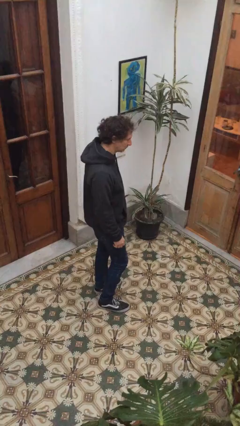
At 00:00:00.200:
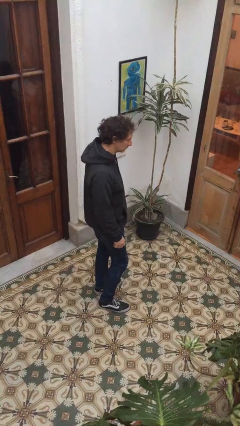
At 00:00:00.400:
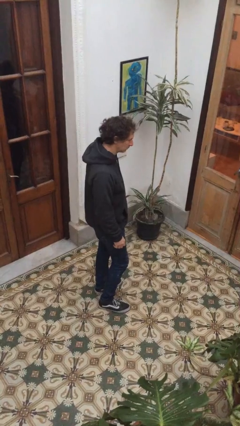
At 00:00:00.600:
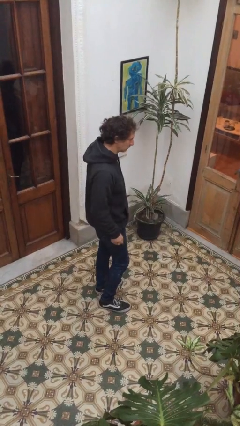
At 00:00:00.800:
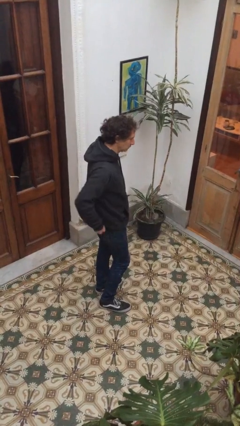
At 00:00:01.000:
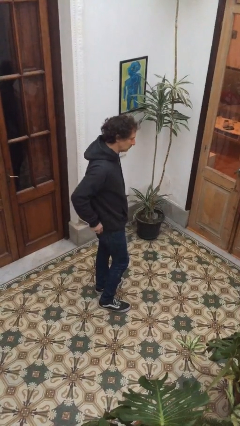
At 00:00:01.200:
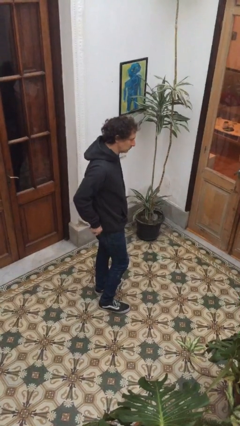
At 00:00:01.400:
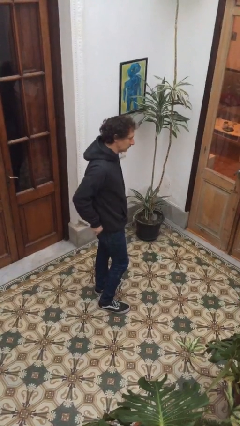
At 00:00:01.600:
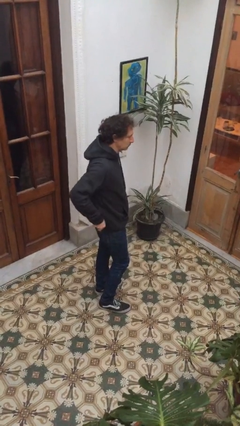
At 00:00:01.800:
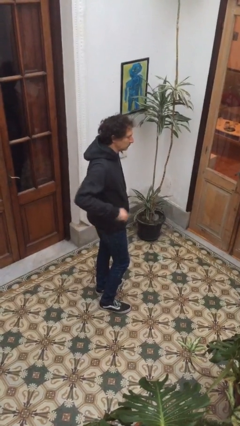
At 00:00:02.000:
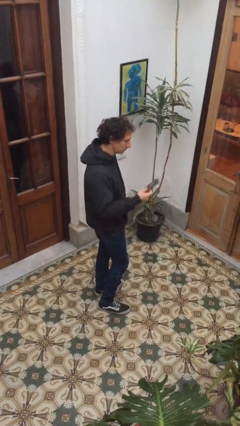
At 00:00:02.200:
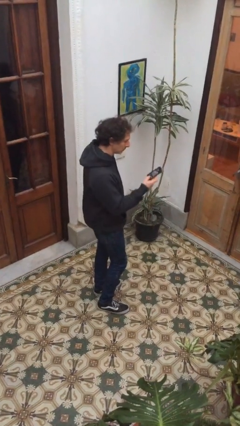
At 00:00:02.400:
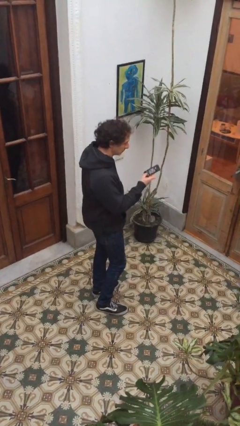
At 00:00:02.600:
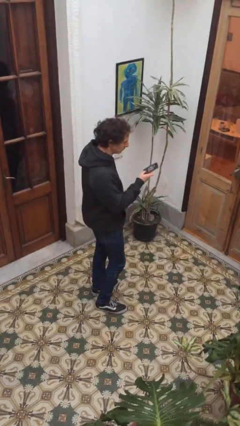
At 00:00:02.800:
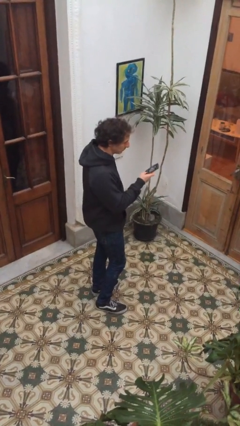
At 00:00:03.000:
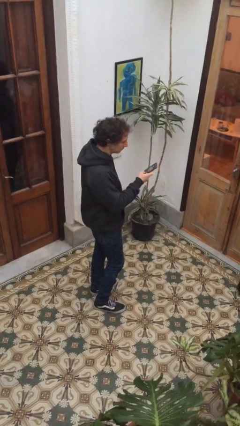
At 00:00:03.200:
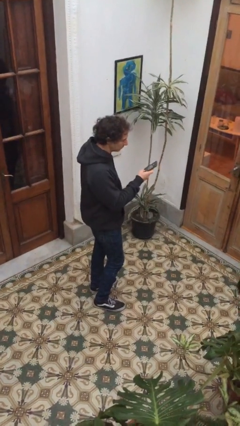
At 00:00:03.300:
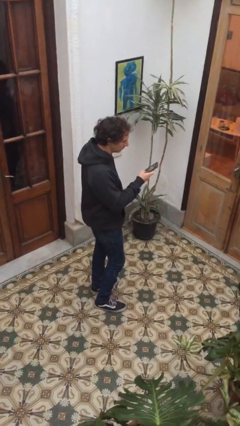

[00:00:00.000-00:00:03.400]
person takes phone from pocket

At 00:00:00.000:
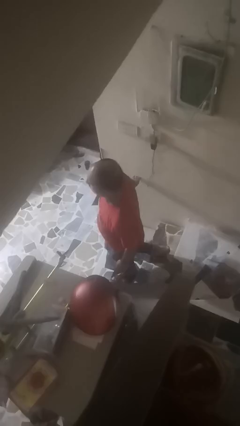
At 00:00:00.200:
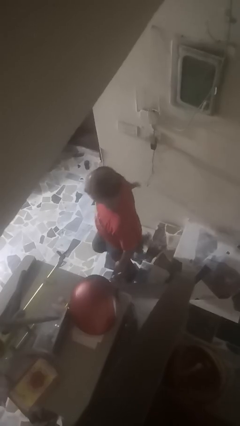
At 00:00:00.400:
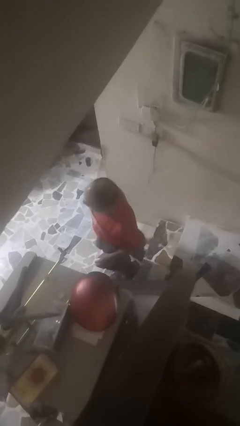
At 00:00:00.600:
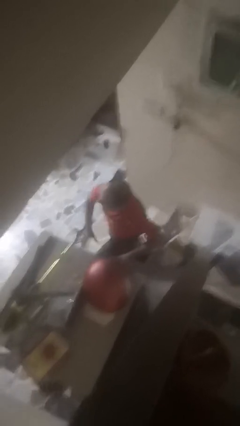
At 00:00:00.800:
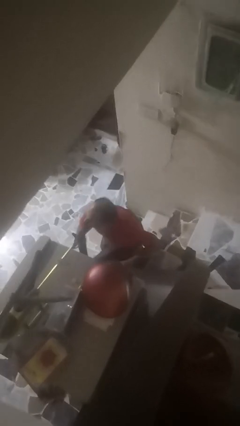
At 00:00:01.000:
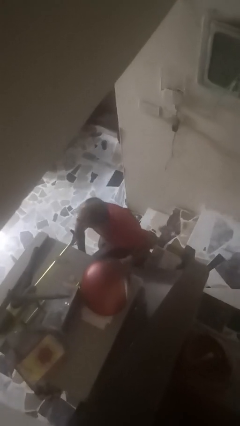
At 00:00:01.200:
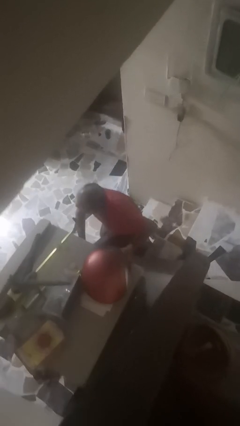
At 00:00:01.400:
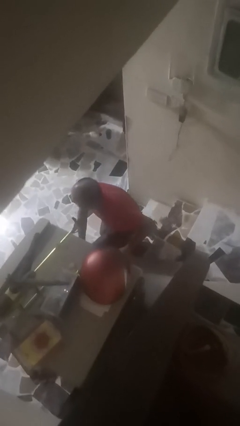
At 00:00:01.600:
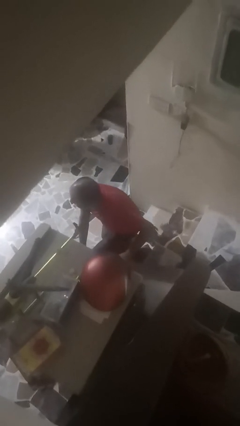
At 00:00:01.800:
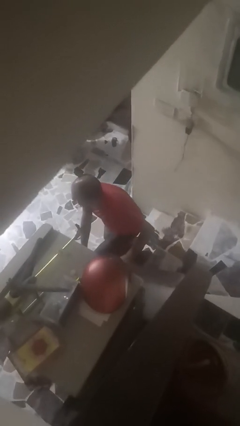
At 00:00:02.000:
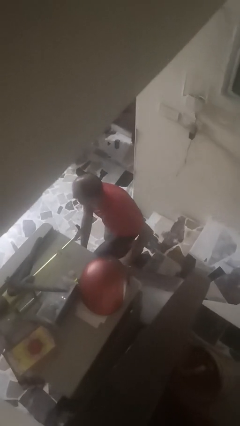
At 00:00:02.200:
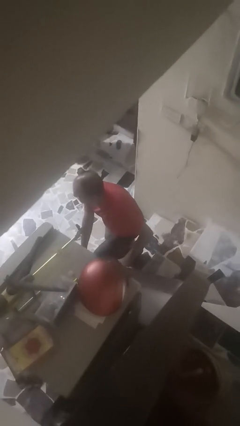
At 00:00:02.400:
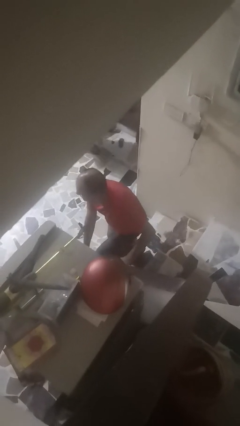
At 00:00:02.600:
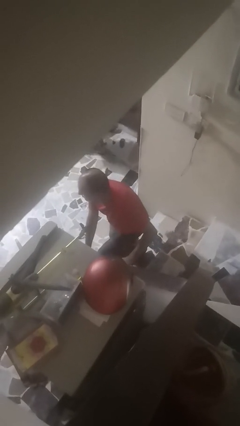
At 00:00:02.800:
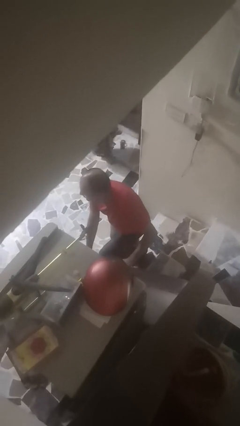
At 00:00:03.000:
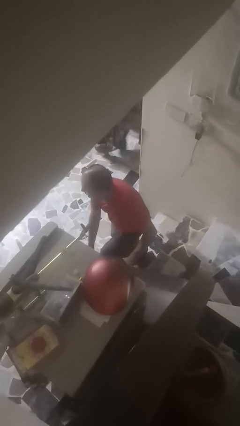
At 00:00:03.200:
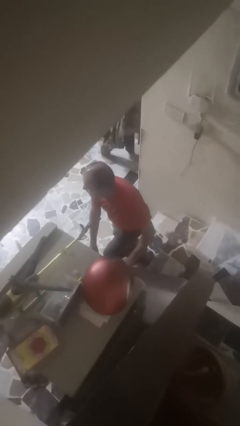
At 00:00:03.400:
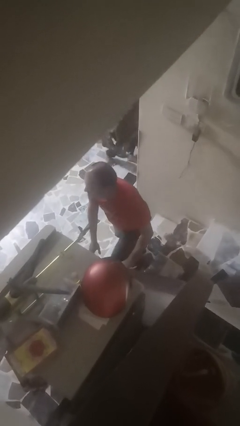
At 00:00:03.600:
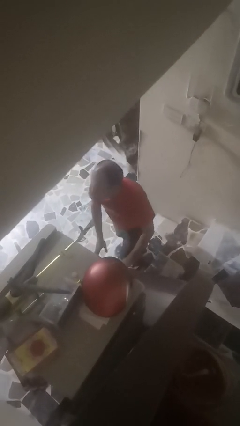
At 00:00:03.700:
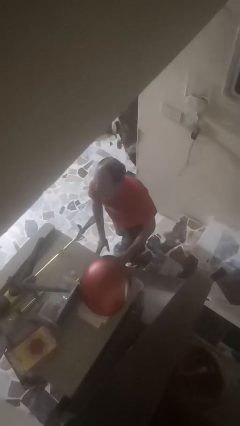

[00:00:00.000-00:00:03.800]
person trips on stair

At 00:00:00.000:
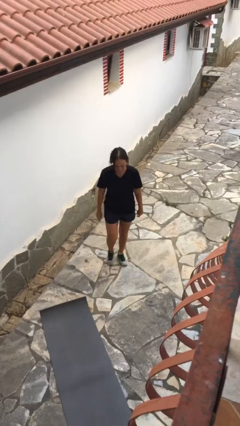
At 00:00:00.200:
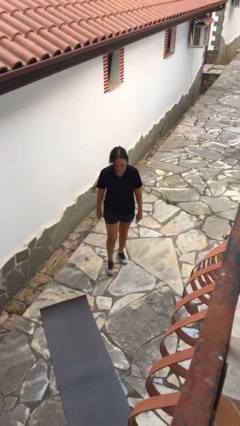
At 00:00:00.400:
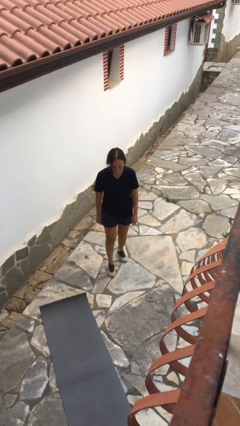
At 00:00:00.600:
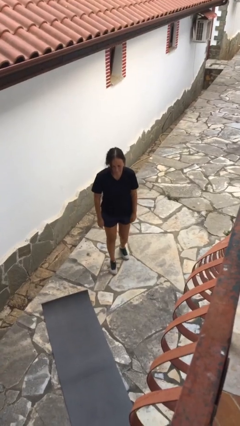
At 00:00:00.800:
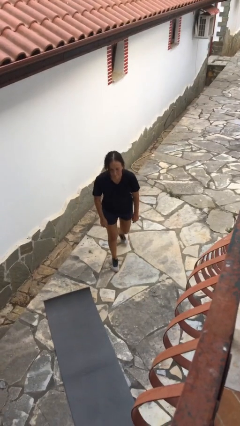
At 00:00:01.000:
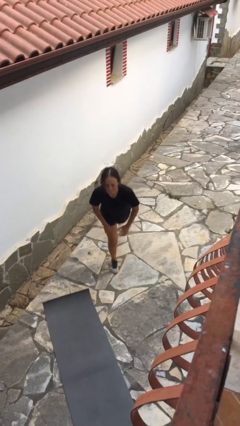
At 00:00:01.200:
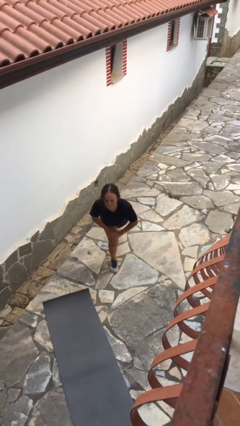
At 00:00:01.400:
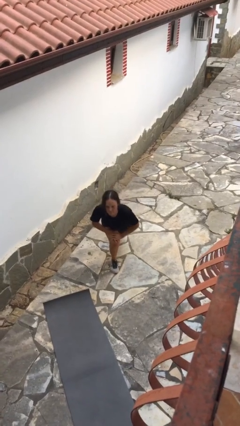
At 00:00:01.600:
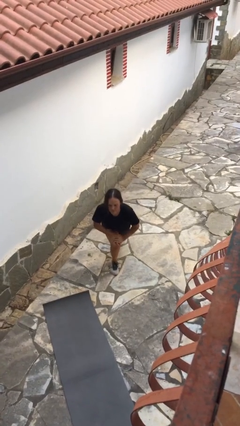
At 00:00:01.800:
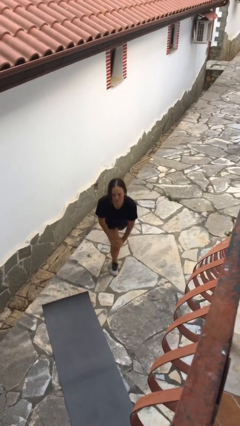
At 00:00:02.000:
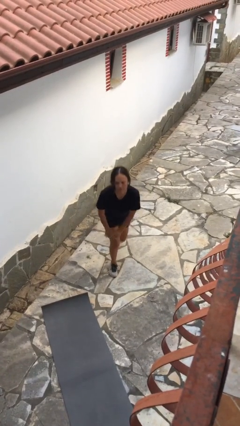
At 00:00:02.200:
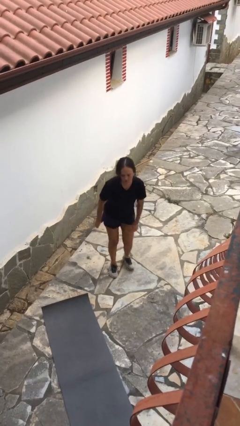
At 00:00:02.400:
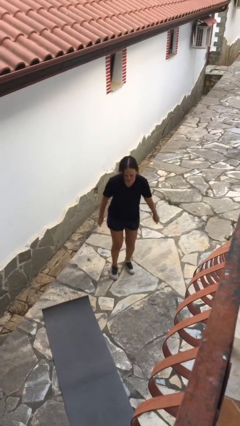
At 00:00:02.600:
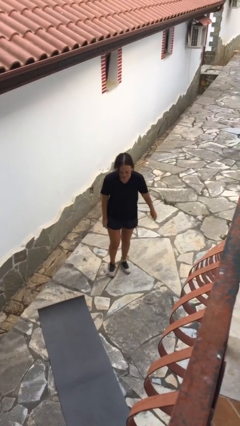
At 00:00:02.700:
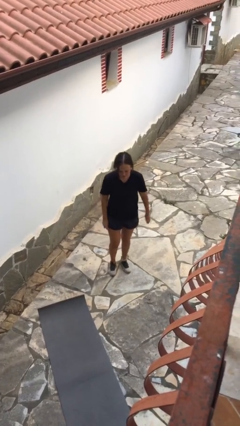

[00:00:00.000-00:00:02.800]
person exercises with lunges

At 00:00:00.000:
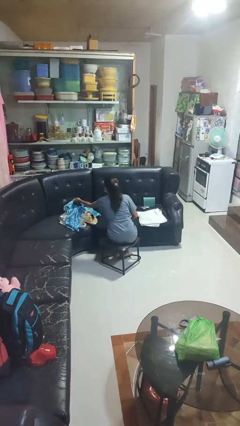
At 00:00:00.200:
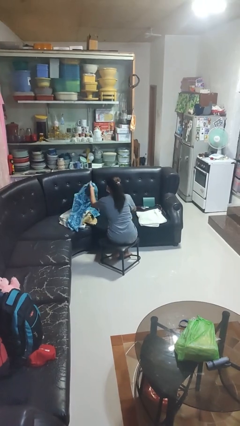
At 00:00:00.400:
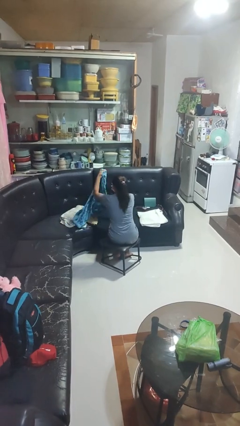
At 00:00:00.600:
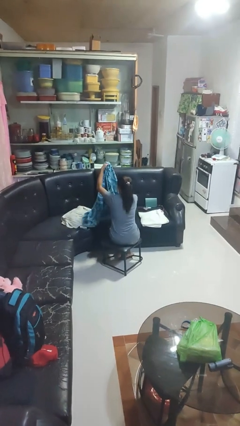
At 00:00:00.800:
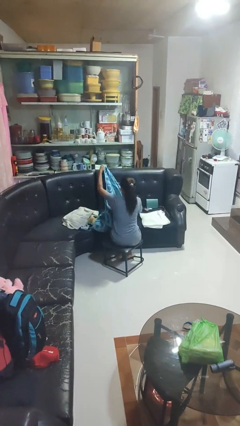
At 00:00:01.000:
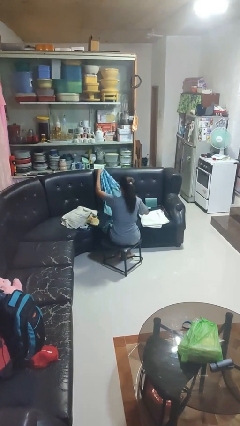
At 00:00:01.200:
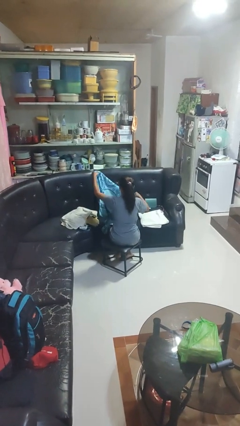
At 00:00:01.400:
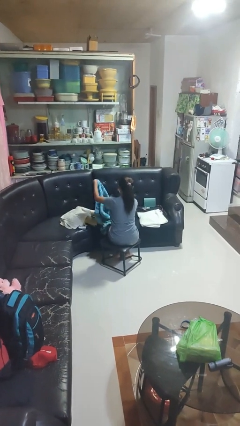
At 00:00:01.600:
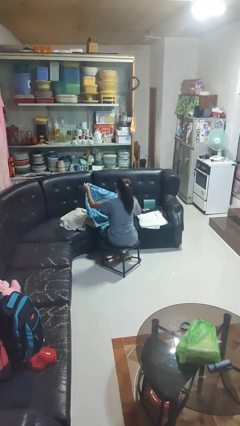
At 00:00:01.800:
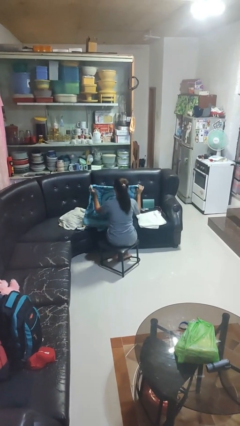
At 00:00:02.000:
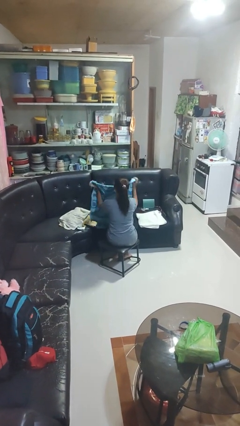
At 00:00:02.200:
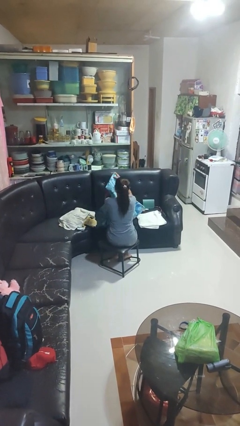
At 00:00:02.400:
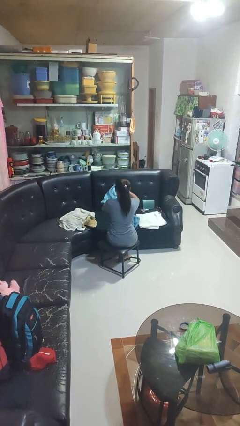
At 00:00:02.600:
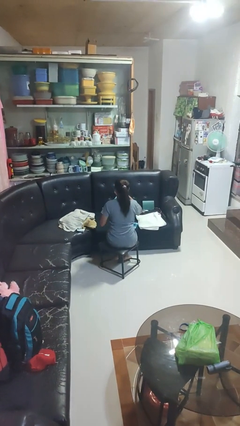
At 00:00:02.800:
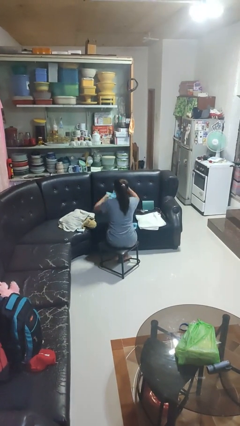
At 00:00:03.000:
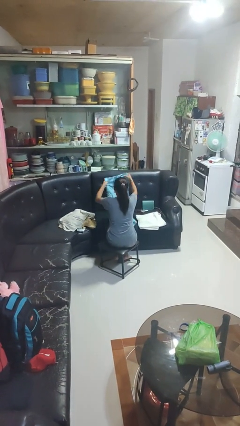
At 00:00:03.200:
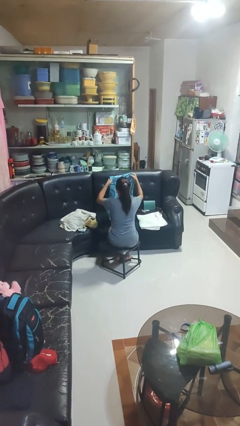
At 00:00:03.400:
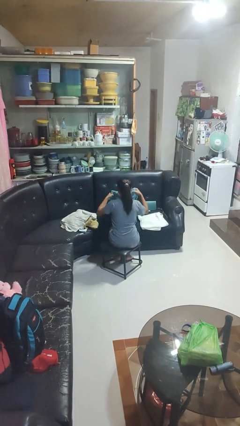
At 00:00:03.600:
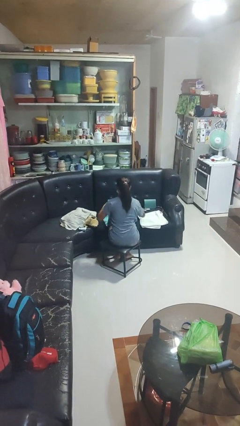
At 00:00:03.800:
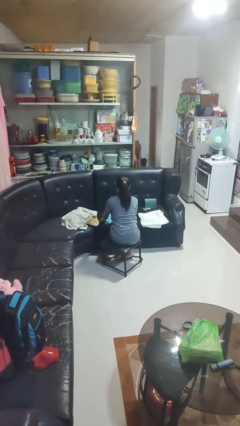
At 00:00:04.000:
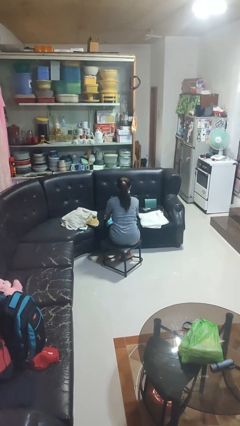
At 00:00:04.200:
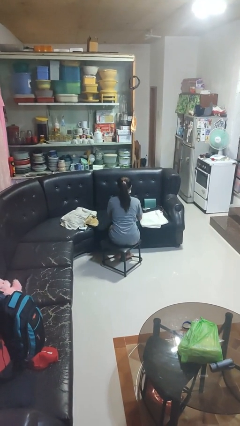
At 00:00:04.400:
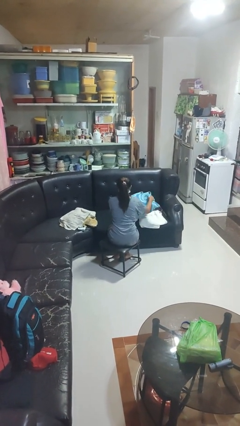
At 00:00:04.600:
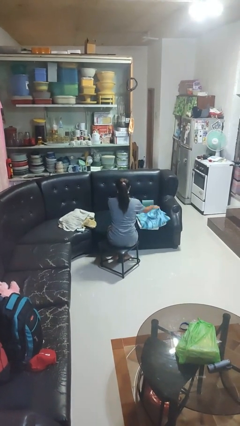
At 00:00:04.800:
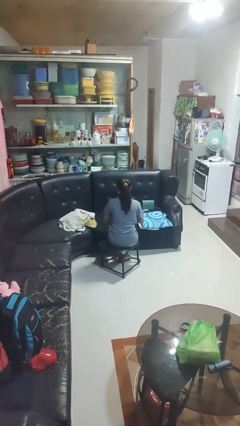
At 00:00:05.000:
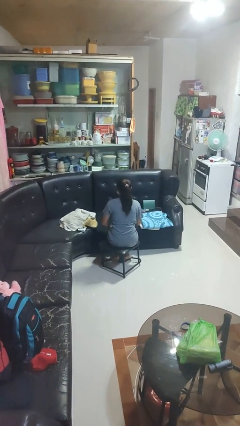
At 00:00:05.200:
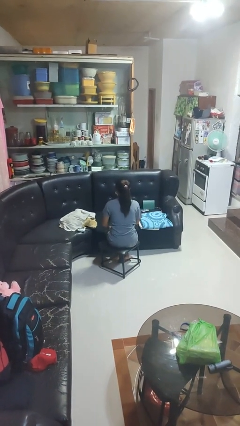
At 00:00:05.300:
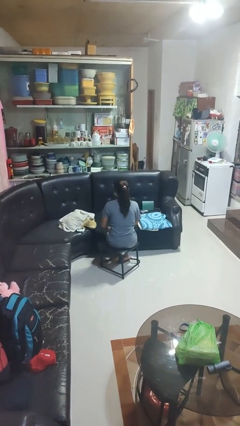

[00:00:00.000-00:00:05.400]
person folds towel

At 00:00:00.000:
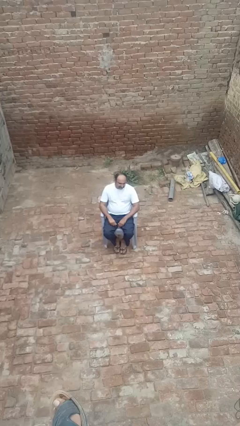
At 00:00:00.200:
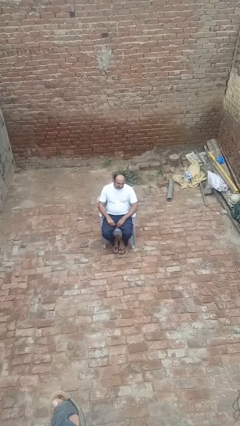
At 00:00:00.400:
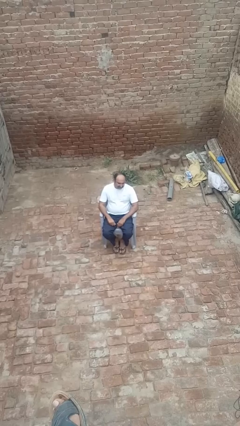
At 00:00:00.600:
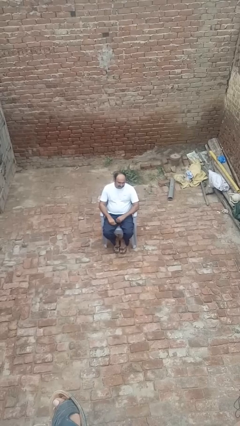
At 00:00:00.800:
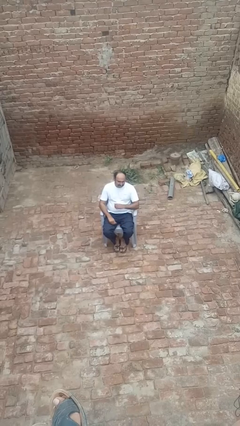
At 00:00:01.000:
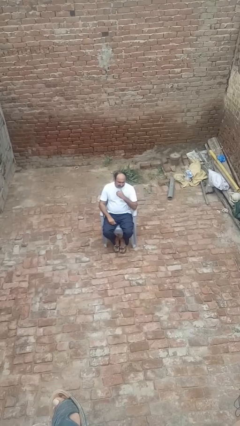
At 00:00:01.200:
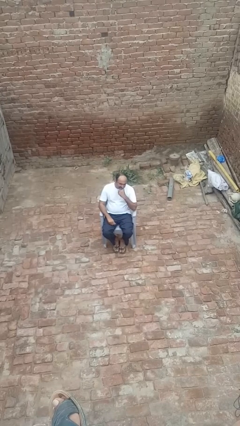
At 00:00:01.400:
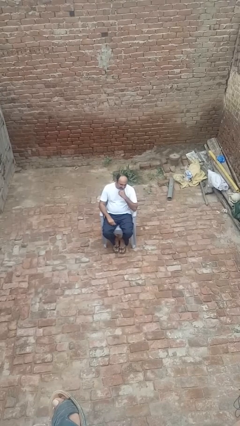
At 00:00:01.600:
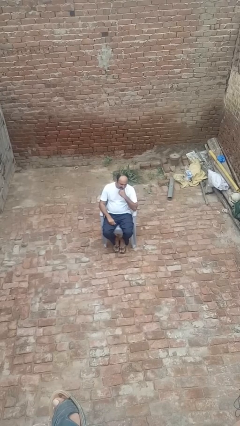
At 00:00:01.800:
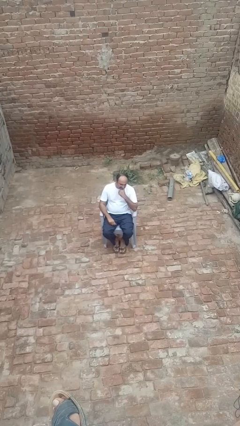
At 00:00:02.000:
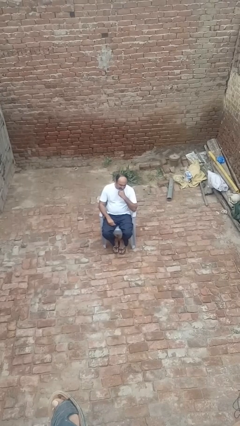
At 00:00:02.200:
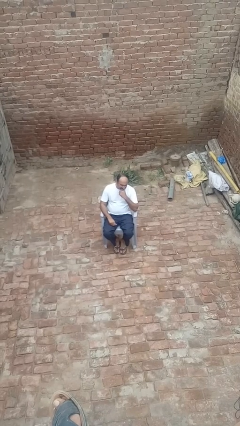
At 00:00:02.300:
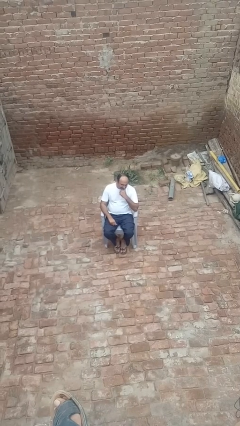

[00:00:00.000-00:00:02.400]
person strokes chin
